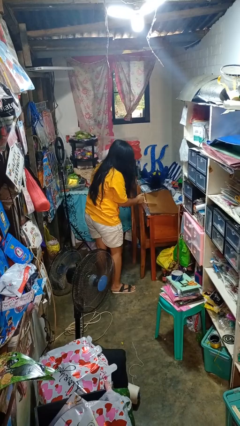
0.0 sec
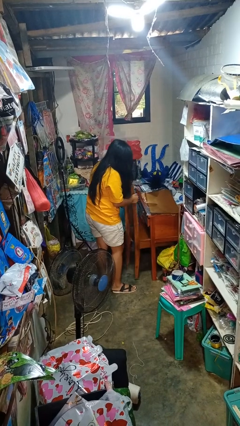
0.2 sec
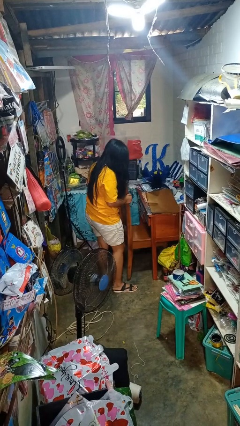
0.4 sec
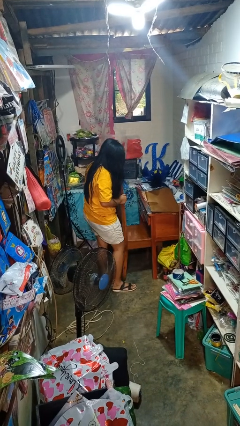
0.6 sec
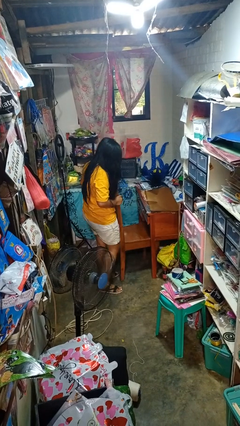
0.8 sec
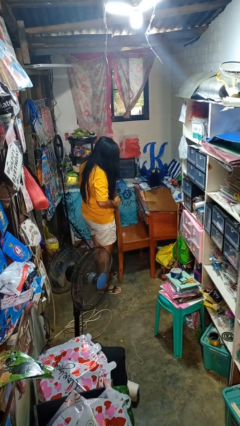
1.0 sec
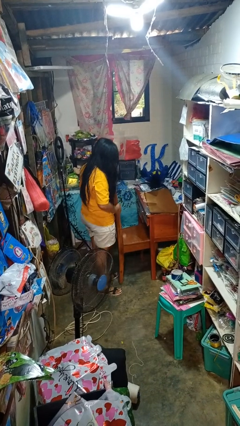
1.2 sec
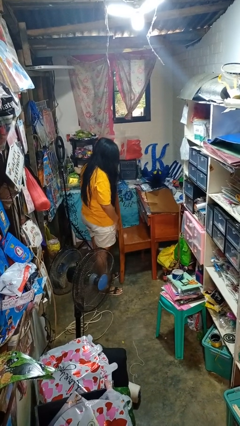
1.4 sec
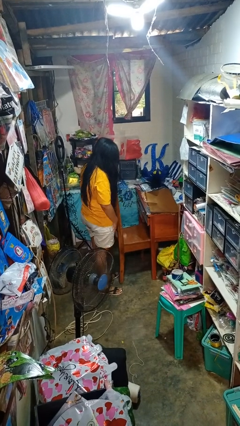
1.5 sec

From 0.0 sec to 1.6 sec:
person pulls out chair

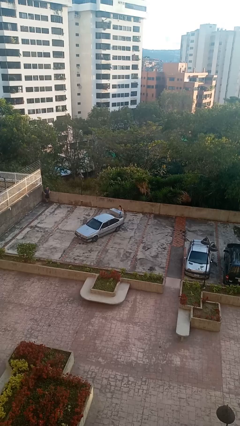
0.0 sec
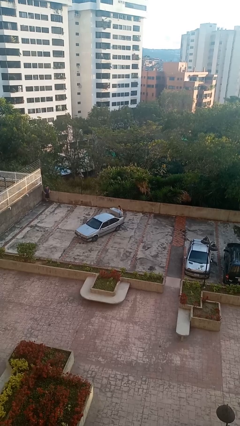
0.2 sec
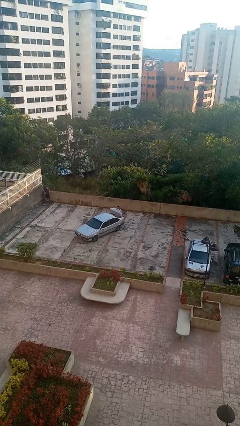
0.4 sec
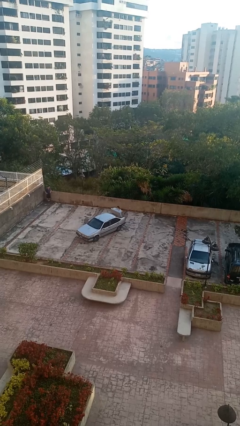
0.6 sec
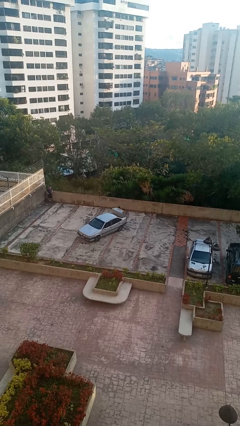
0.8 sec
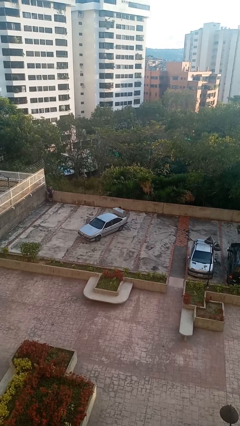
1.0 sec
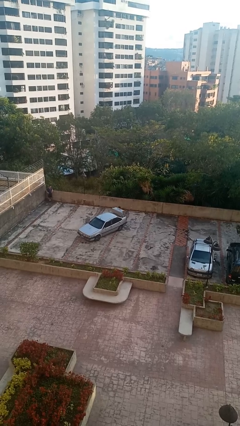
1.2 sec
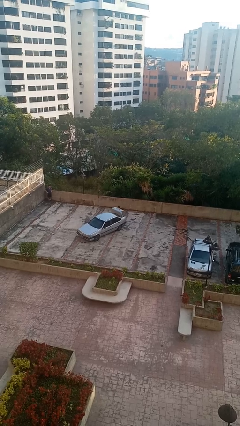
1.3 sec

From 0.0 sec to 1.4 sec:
person loads car

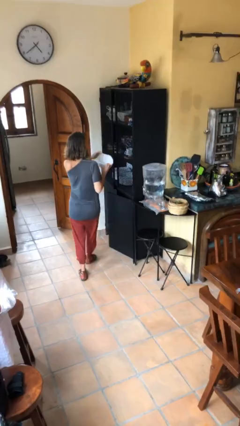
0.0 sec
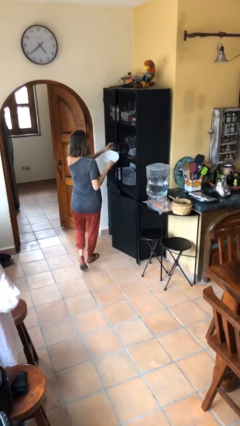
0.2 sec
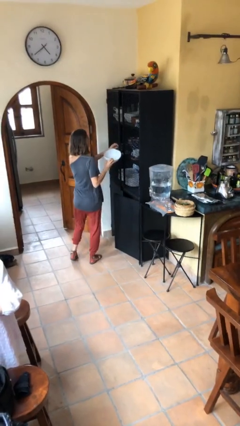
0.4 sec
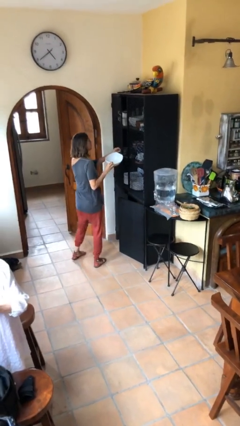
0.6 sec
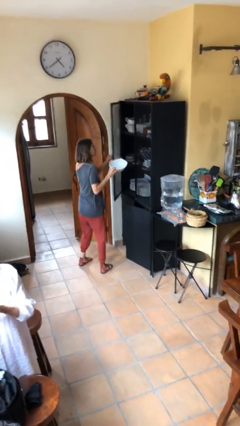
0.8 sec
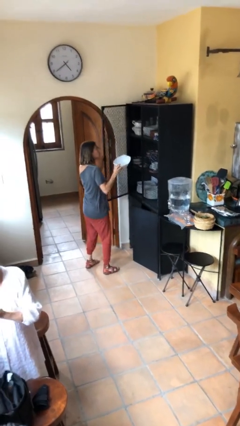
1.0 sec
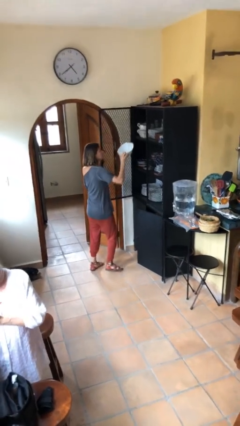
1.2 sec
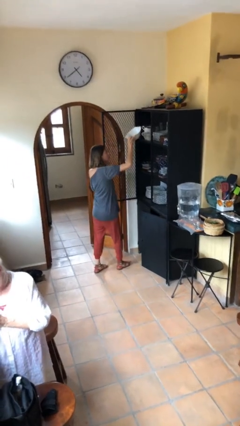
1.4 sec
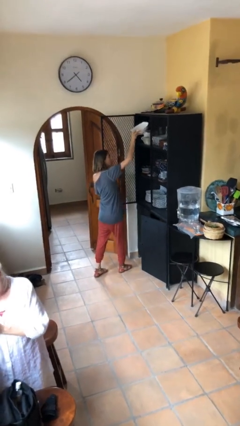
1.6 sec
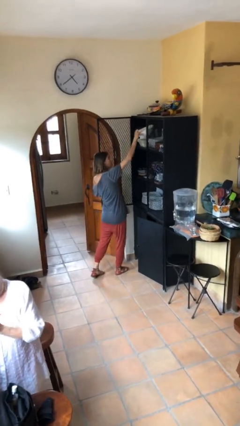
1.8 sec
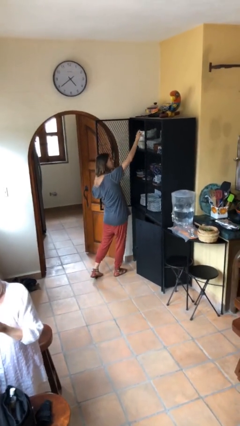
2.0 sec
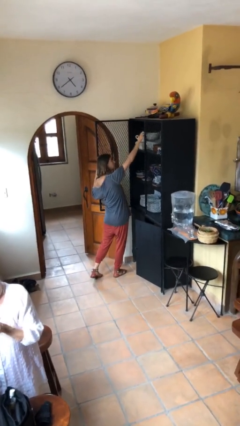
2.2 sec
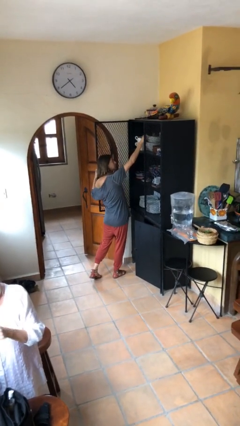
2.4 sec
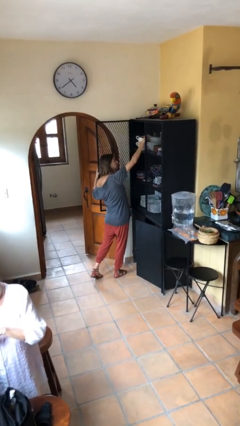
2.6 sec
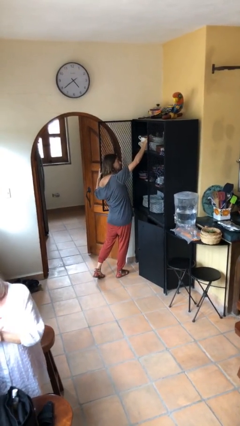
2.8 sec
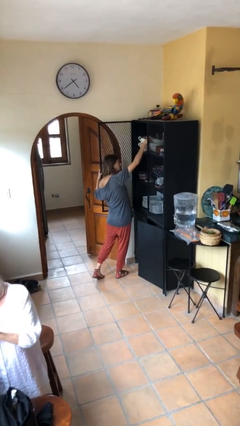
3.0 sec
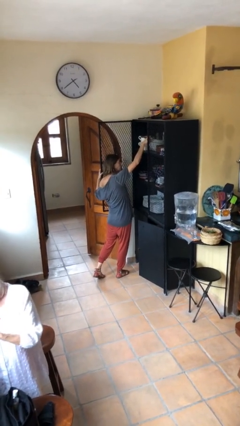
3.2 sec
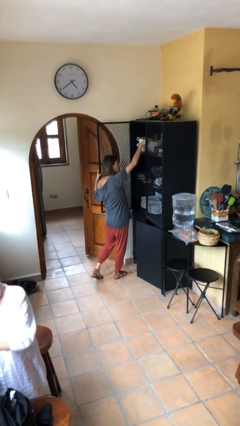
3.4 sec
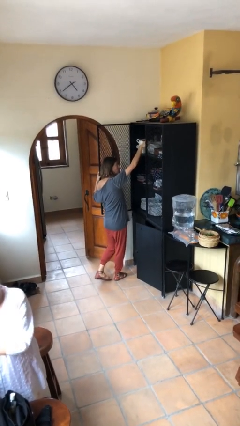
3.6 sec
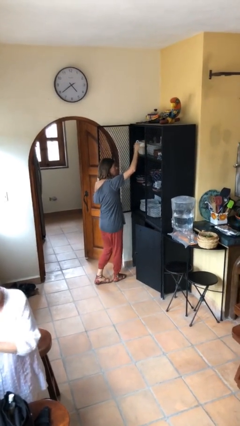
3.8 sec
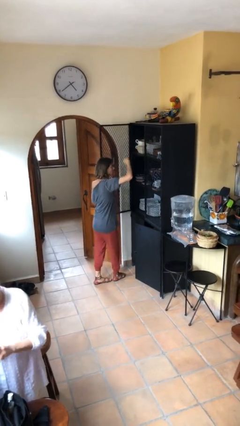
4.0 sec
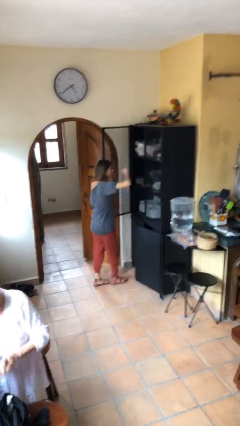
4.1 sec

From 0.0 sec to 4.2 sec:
person puts down object on shelf

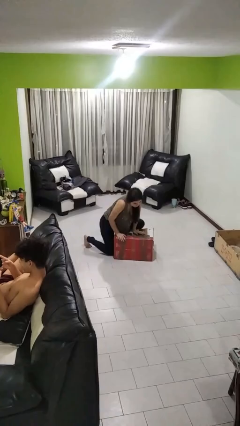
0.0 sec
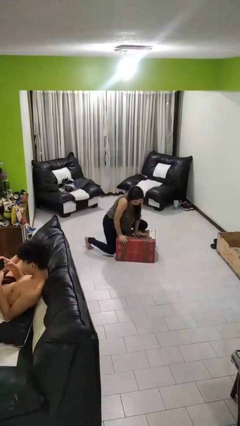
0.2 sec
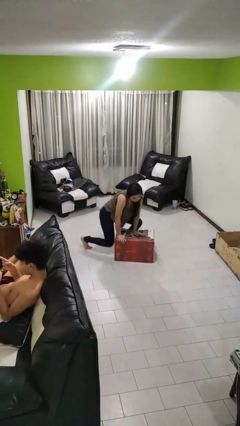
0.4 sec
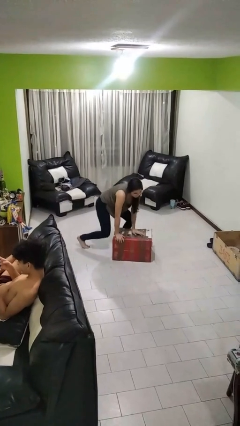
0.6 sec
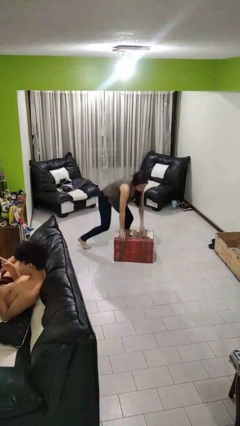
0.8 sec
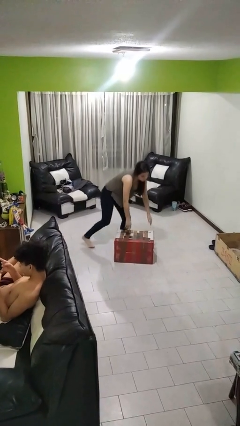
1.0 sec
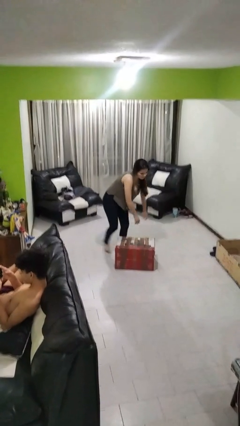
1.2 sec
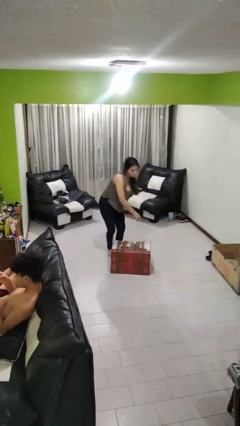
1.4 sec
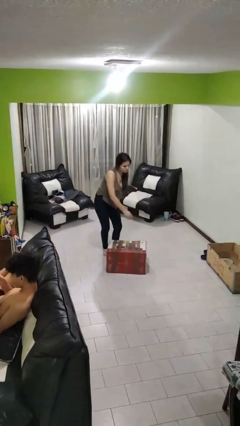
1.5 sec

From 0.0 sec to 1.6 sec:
person stands up from floor

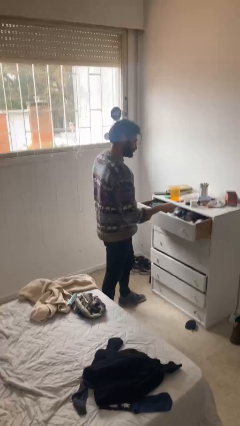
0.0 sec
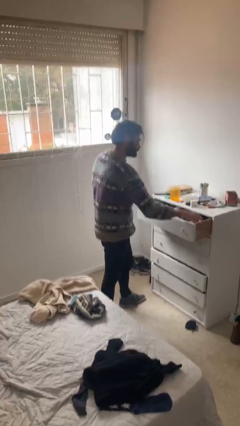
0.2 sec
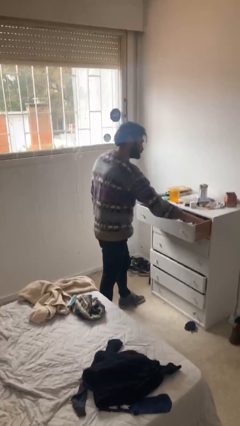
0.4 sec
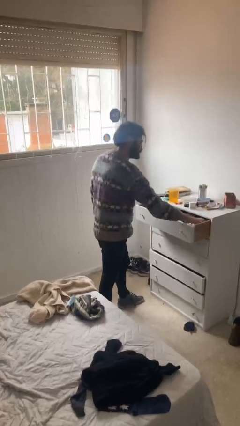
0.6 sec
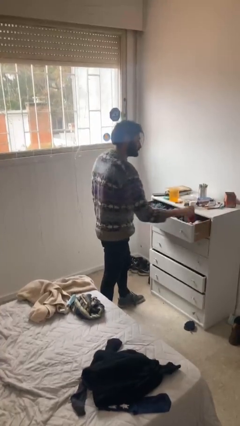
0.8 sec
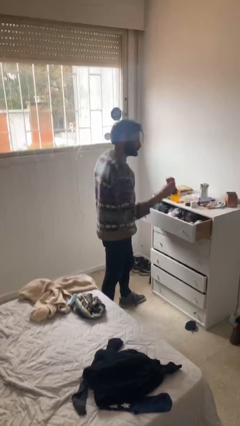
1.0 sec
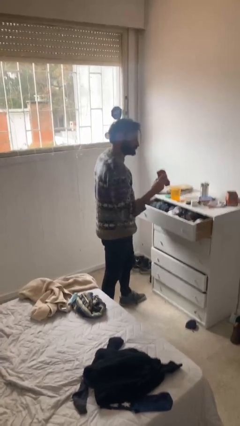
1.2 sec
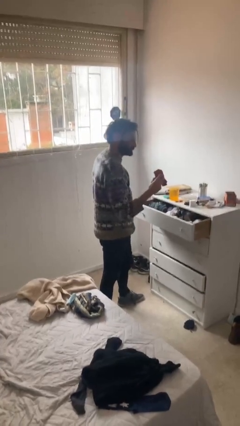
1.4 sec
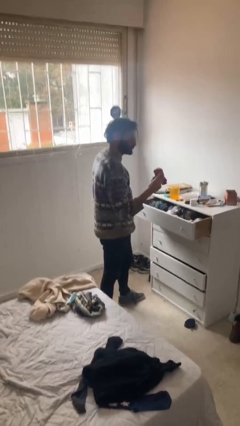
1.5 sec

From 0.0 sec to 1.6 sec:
person takes clothes from dresser

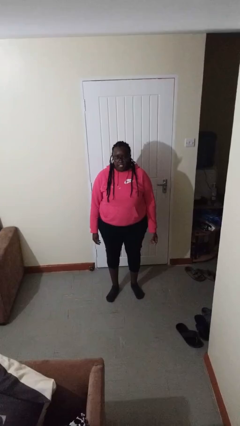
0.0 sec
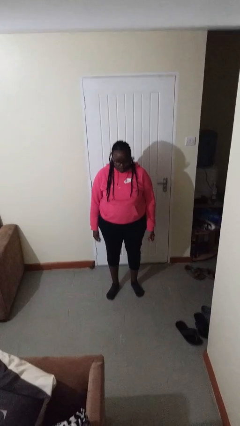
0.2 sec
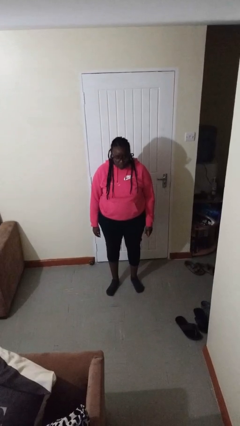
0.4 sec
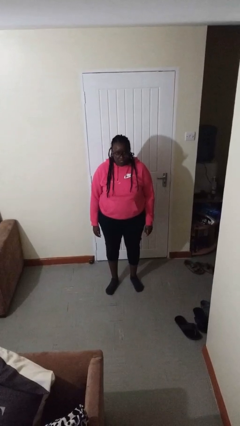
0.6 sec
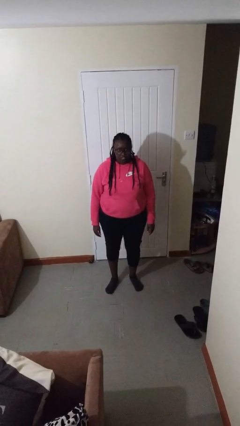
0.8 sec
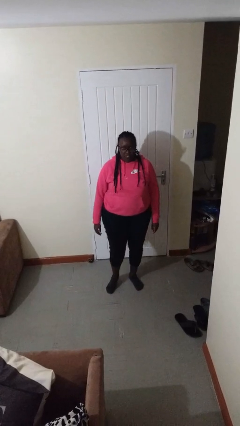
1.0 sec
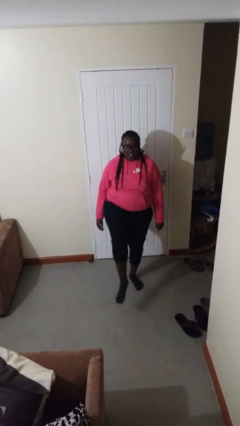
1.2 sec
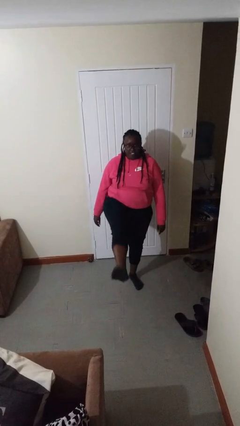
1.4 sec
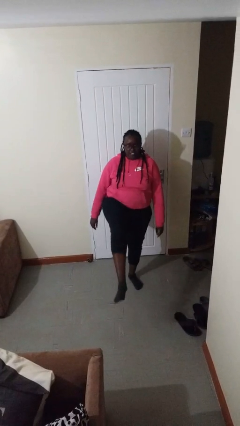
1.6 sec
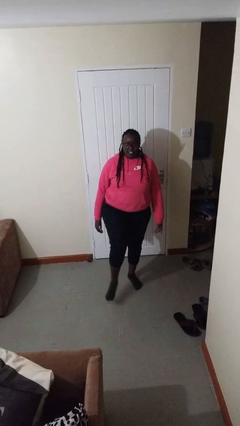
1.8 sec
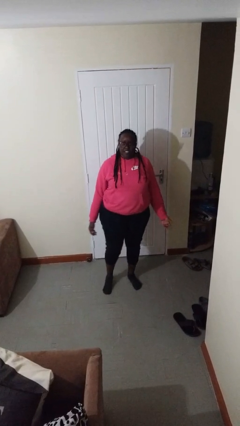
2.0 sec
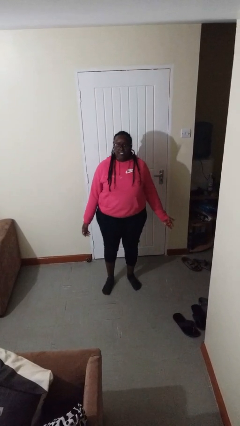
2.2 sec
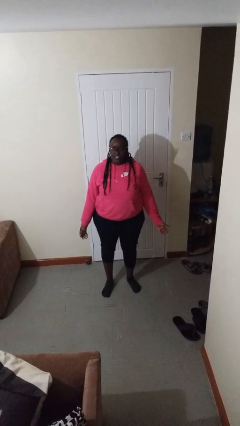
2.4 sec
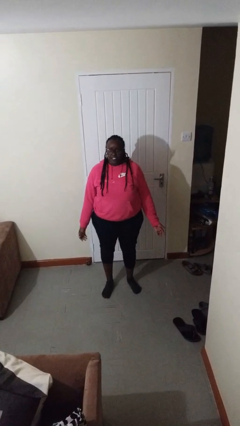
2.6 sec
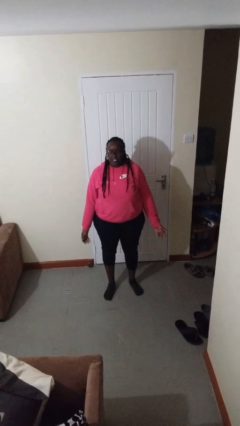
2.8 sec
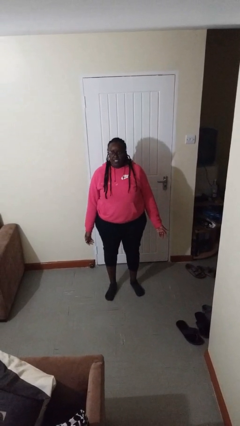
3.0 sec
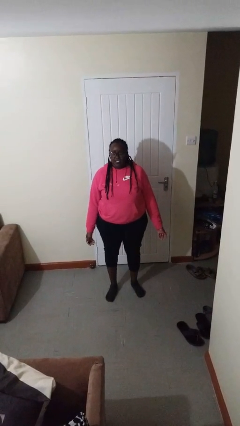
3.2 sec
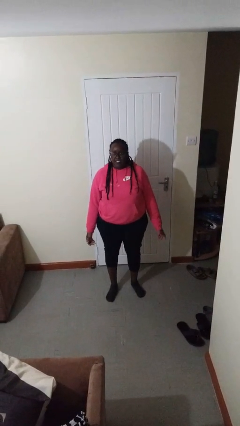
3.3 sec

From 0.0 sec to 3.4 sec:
person karate kicks

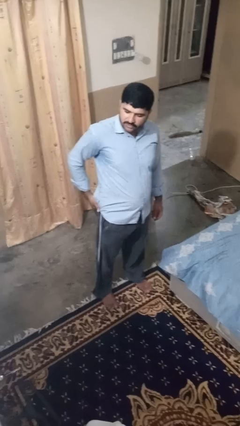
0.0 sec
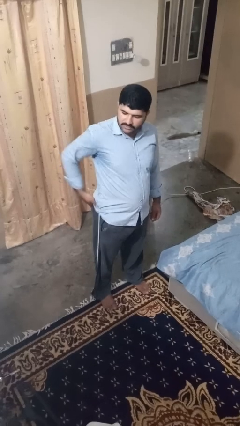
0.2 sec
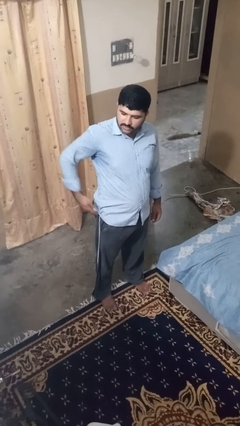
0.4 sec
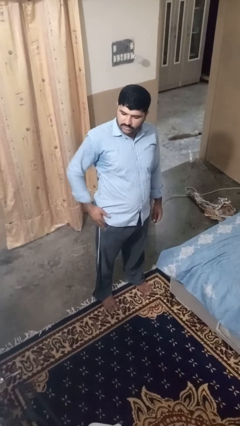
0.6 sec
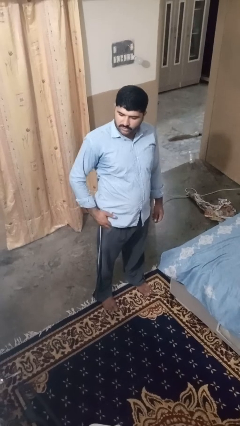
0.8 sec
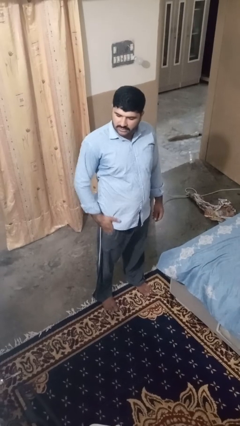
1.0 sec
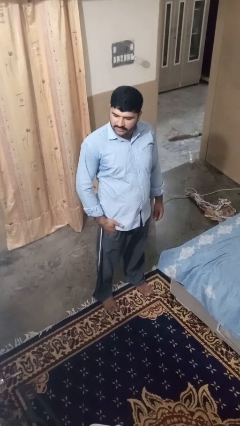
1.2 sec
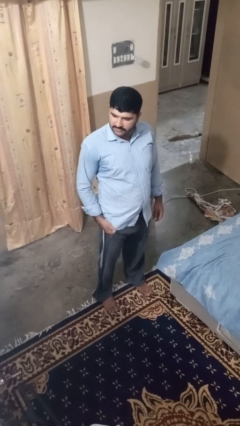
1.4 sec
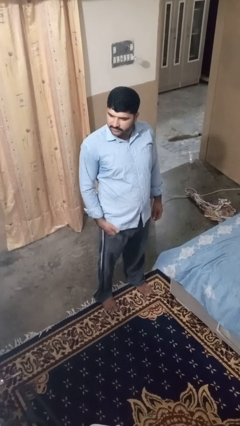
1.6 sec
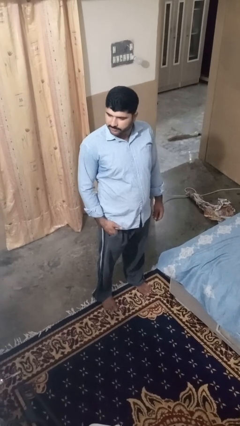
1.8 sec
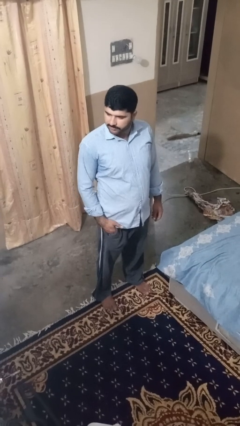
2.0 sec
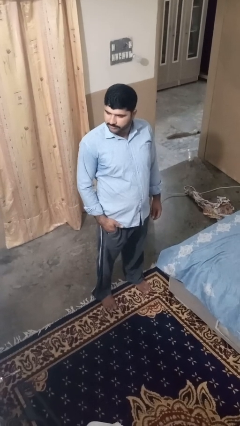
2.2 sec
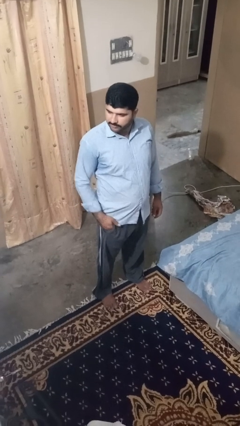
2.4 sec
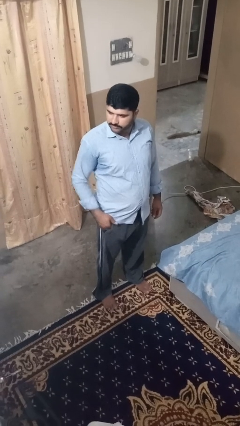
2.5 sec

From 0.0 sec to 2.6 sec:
person puts hands in back pockets

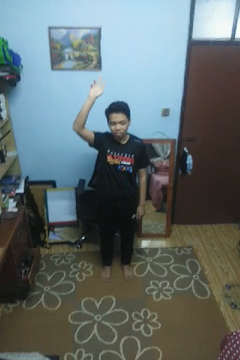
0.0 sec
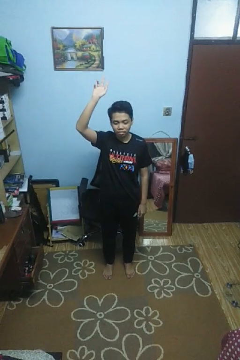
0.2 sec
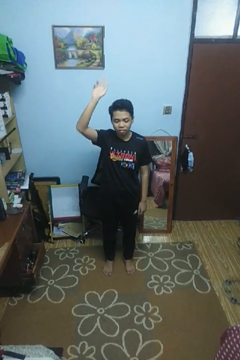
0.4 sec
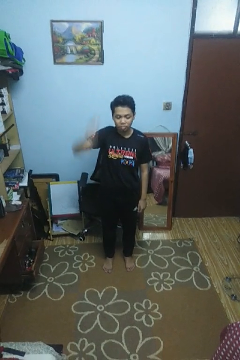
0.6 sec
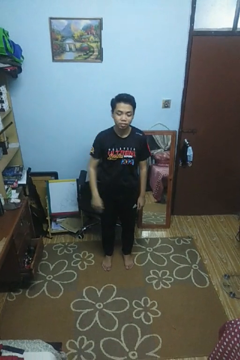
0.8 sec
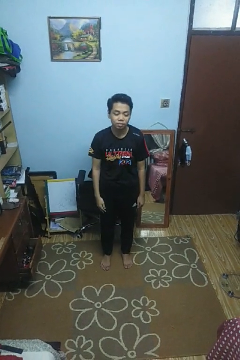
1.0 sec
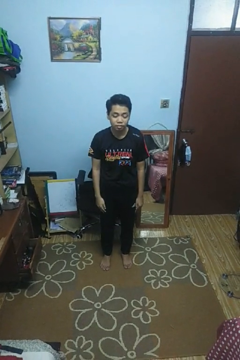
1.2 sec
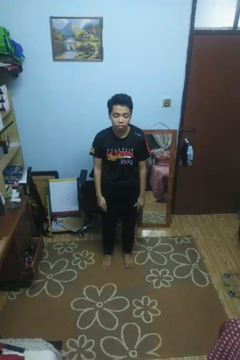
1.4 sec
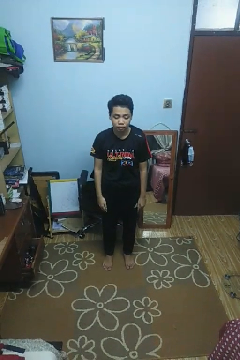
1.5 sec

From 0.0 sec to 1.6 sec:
person gestures lower hand
